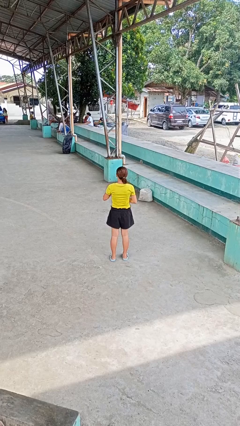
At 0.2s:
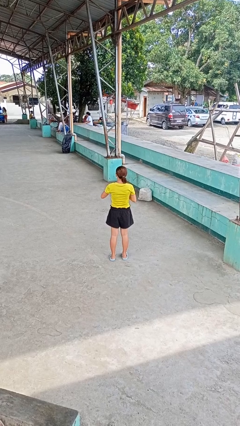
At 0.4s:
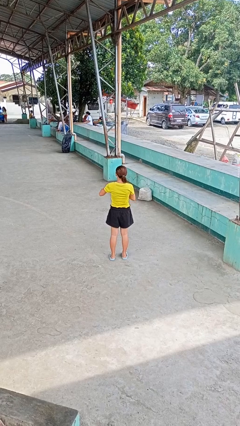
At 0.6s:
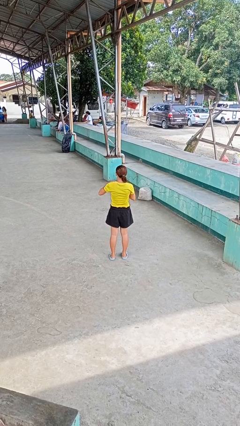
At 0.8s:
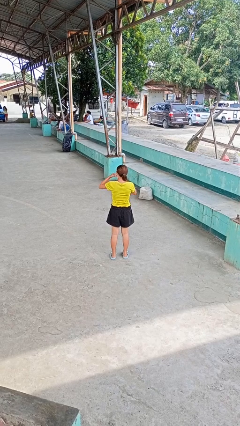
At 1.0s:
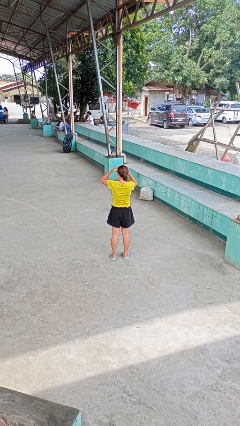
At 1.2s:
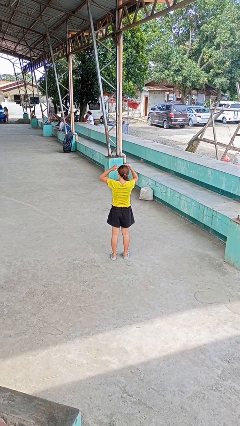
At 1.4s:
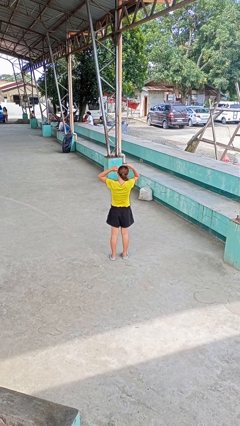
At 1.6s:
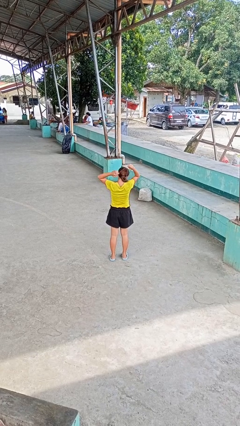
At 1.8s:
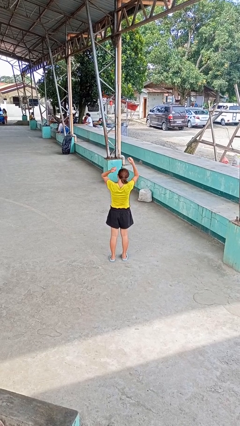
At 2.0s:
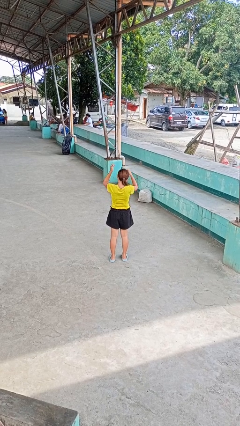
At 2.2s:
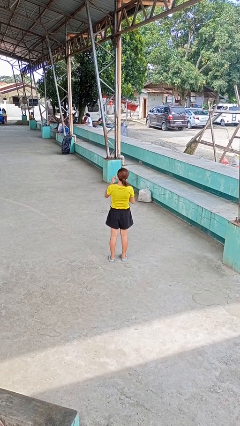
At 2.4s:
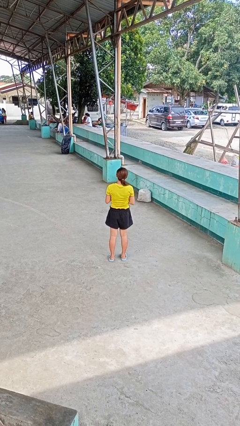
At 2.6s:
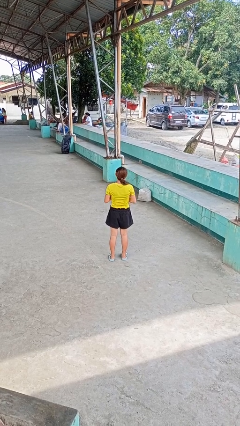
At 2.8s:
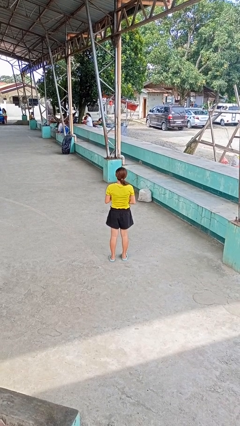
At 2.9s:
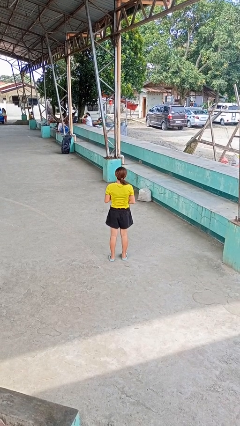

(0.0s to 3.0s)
person takes off necklace

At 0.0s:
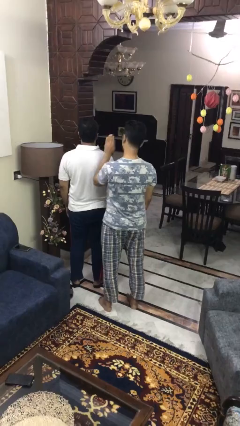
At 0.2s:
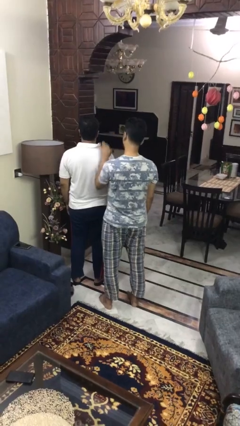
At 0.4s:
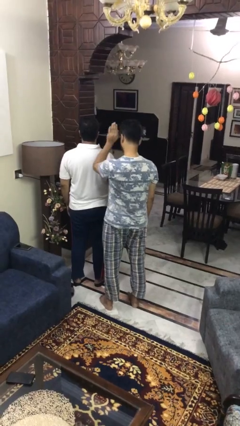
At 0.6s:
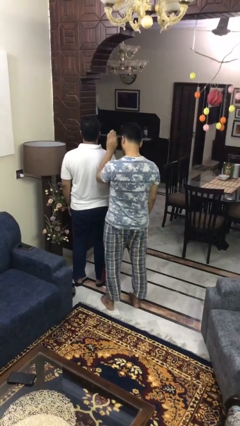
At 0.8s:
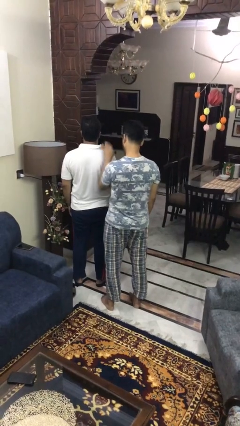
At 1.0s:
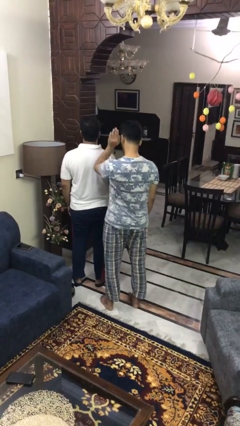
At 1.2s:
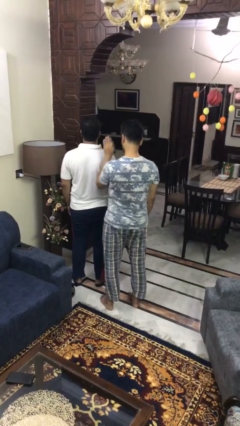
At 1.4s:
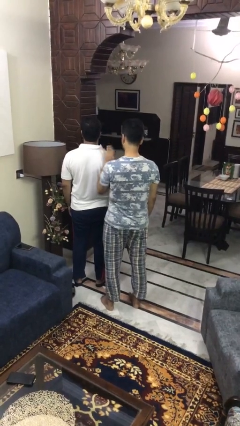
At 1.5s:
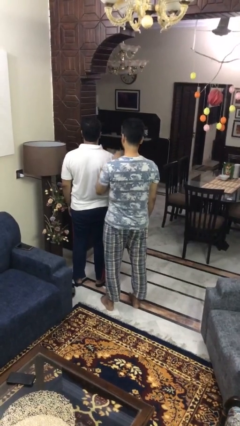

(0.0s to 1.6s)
person pounds shoulders of person

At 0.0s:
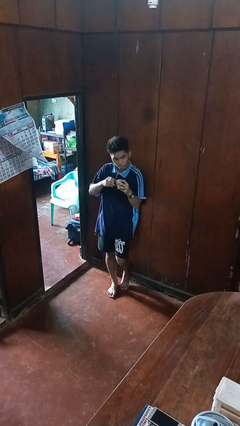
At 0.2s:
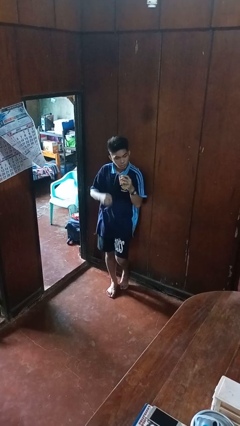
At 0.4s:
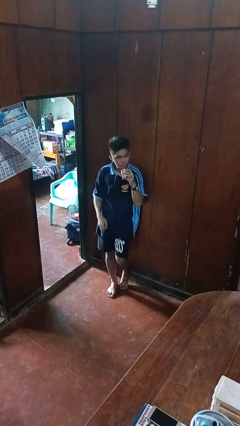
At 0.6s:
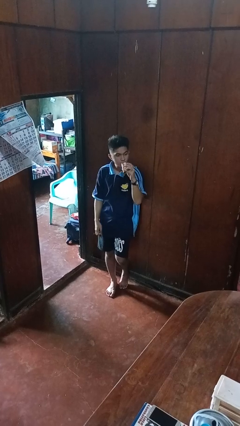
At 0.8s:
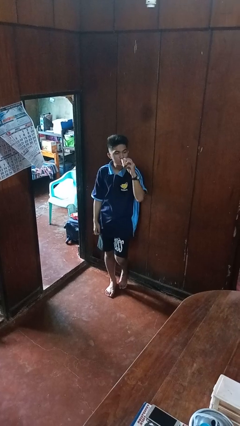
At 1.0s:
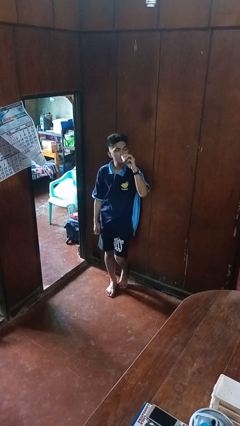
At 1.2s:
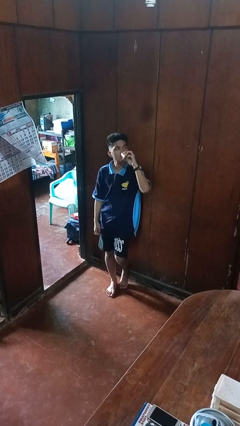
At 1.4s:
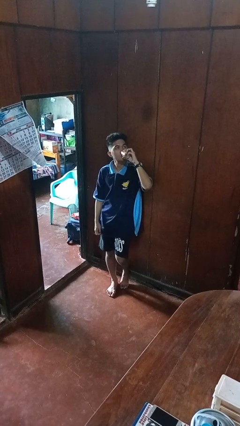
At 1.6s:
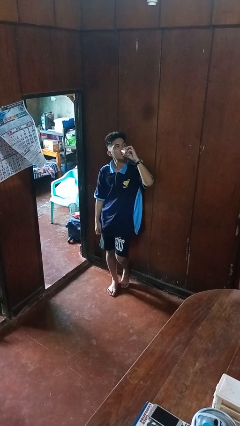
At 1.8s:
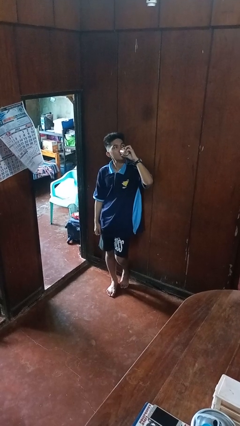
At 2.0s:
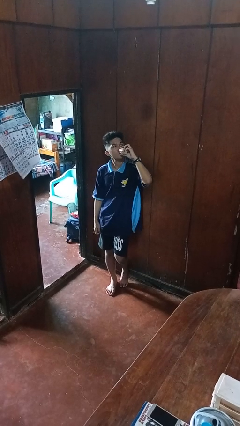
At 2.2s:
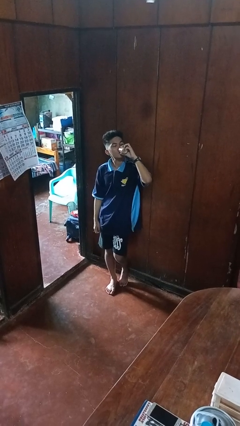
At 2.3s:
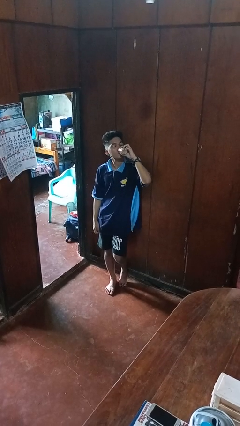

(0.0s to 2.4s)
person drinks from beverage can

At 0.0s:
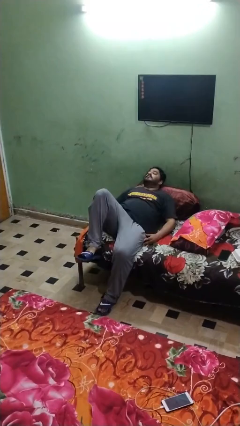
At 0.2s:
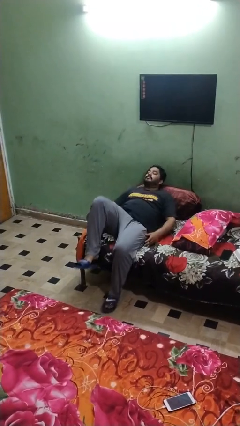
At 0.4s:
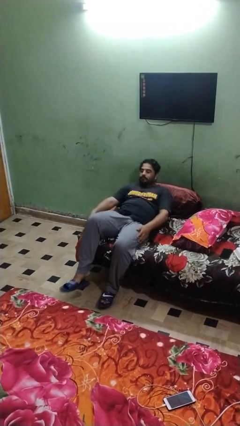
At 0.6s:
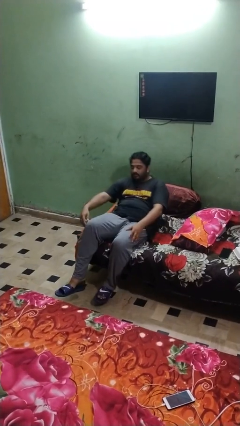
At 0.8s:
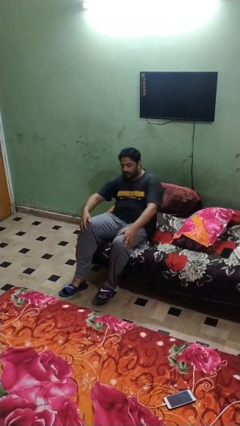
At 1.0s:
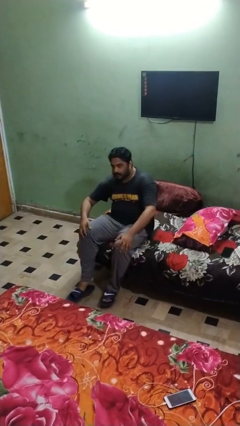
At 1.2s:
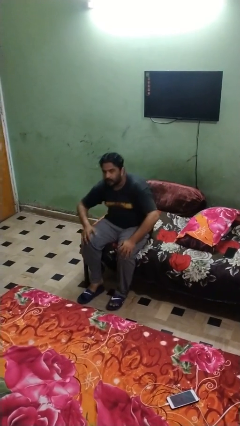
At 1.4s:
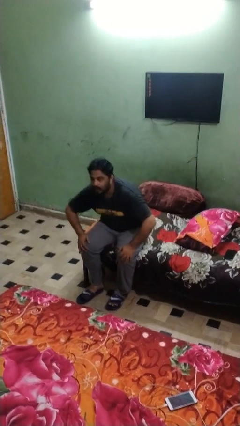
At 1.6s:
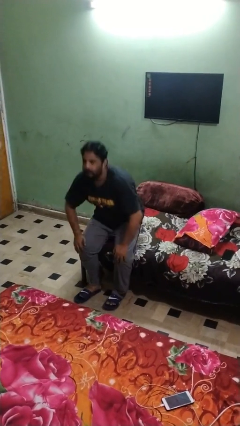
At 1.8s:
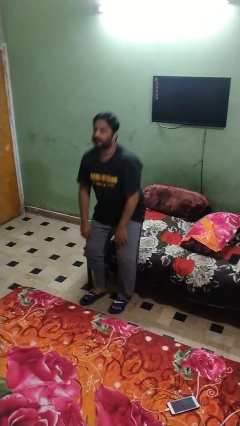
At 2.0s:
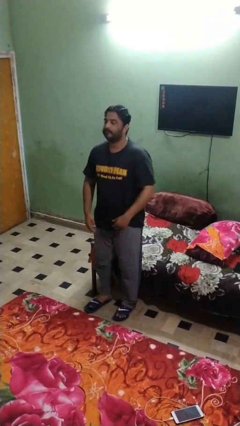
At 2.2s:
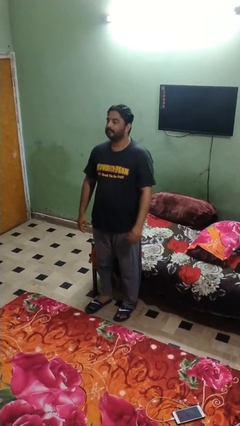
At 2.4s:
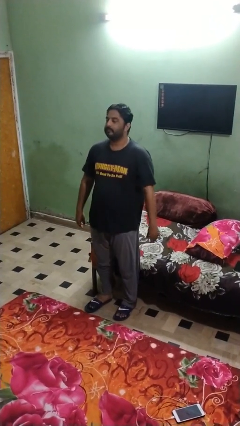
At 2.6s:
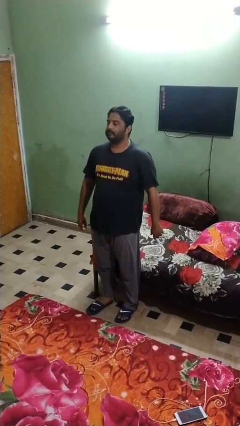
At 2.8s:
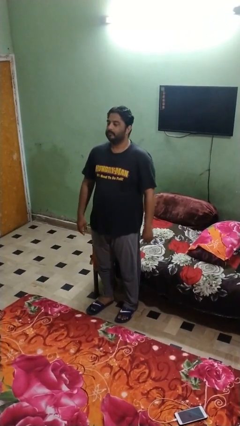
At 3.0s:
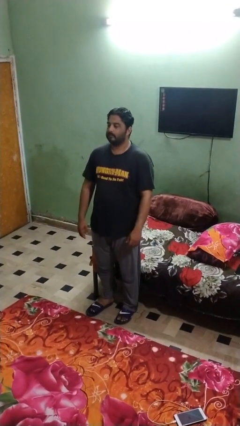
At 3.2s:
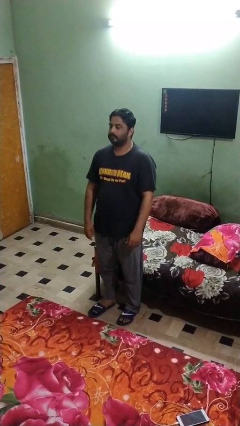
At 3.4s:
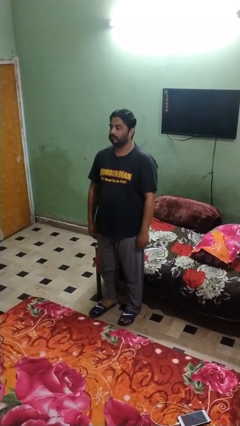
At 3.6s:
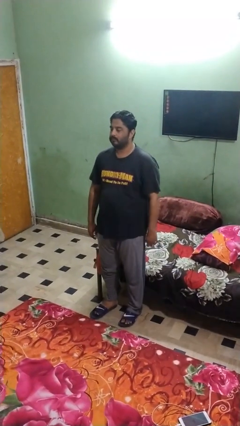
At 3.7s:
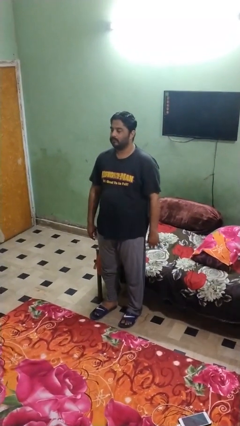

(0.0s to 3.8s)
person stands up

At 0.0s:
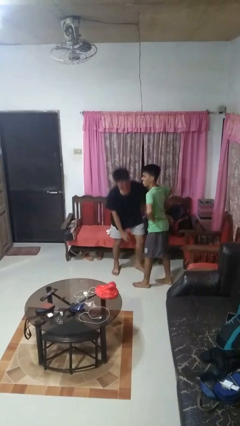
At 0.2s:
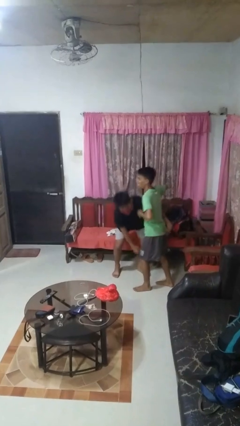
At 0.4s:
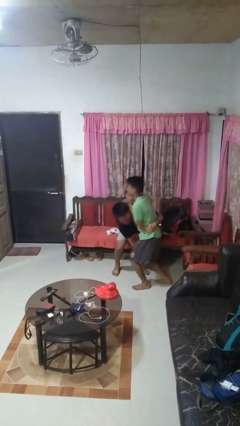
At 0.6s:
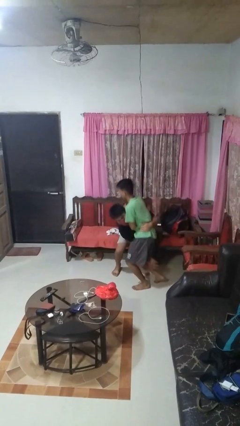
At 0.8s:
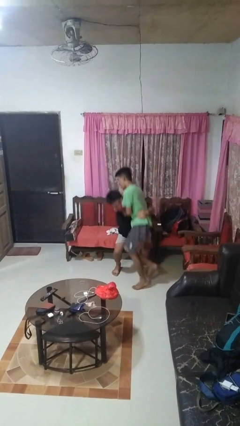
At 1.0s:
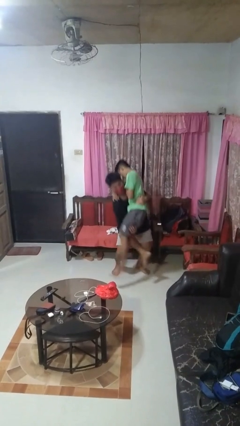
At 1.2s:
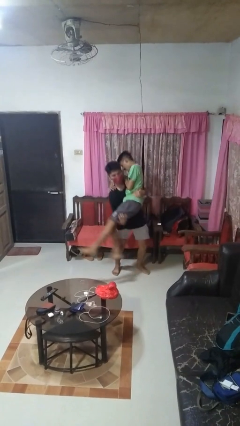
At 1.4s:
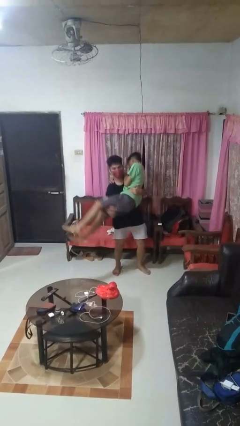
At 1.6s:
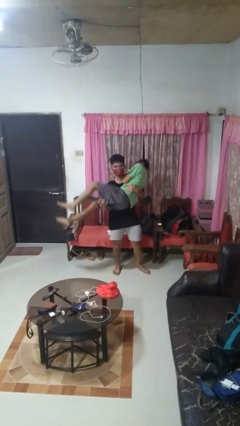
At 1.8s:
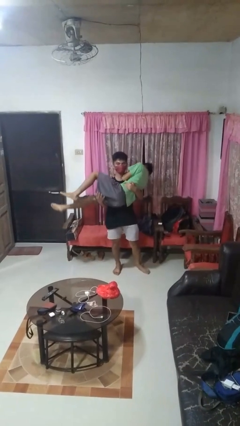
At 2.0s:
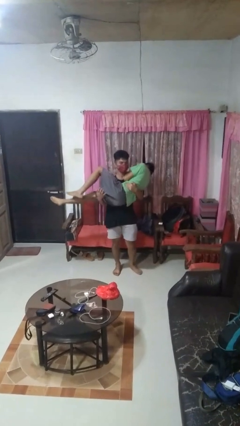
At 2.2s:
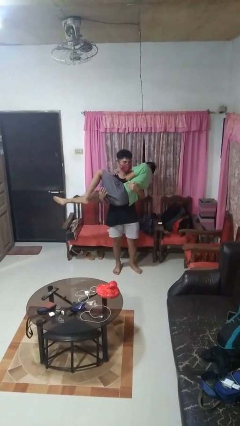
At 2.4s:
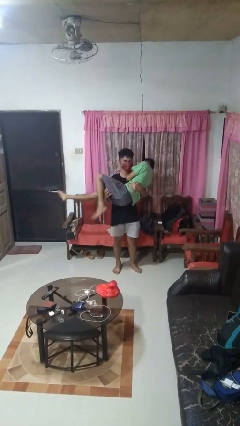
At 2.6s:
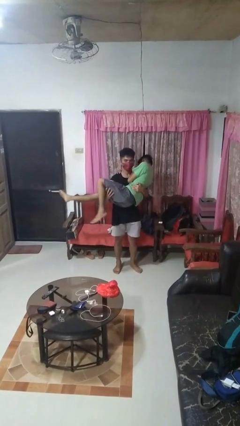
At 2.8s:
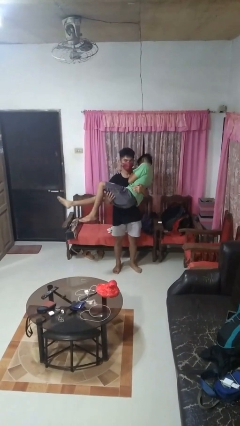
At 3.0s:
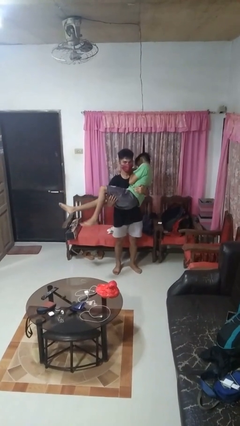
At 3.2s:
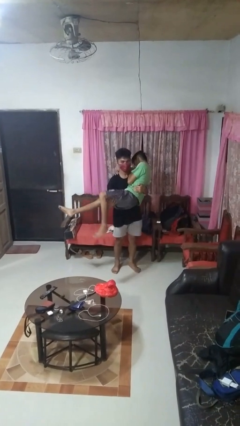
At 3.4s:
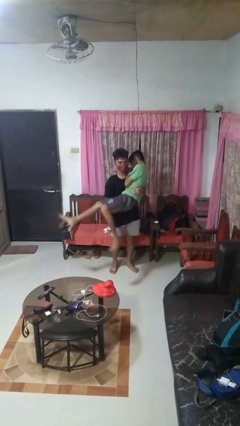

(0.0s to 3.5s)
person picks up person

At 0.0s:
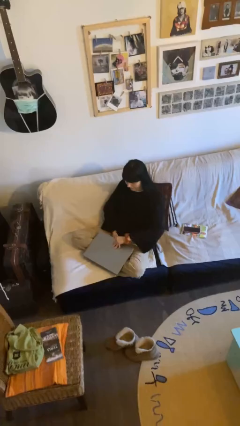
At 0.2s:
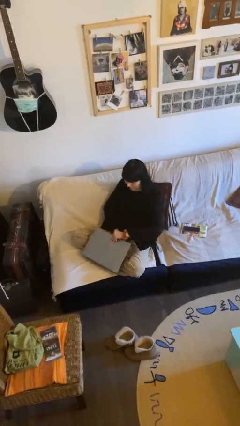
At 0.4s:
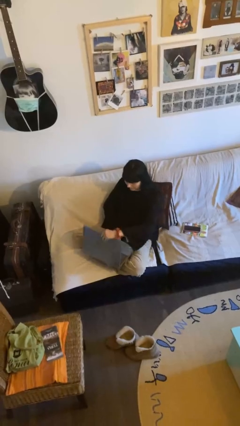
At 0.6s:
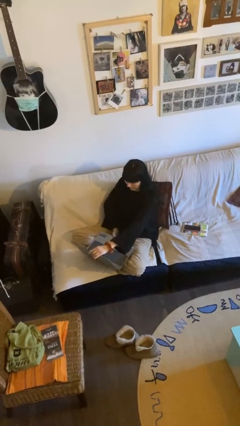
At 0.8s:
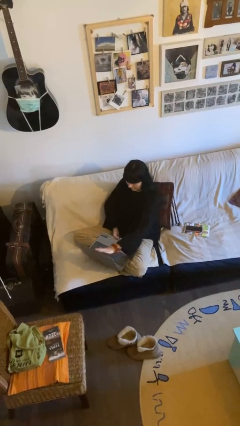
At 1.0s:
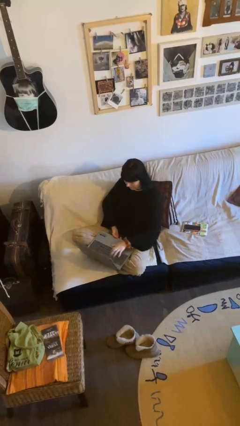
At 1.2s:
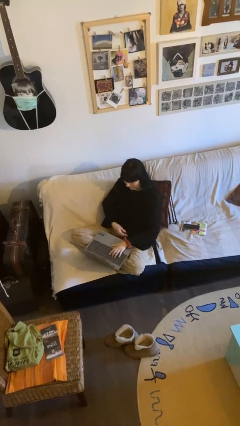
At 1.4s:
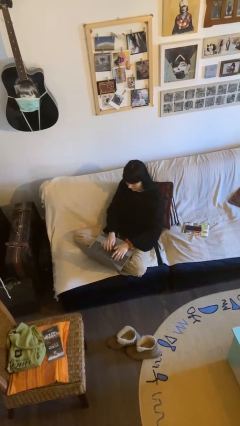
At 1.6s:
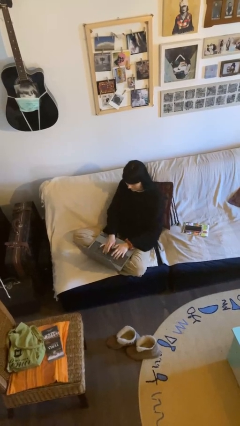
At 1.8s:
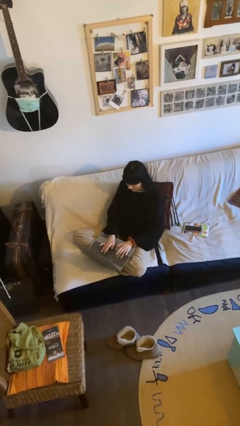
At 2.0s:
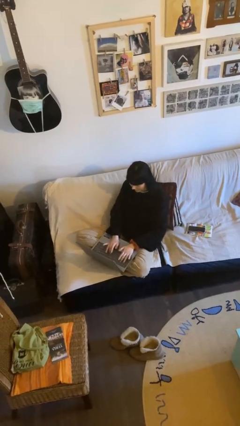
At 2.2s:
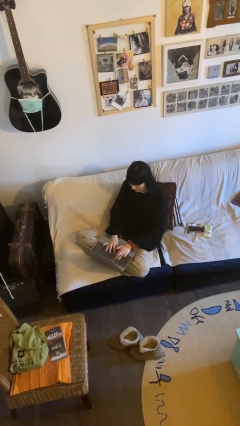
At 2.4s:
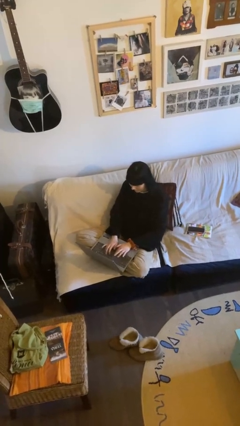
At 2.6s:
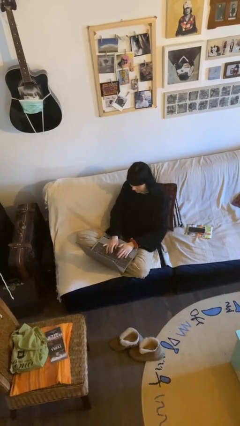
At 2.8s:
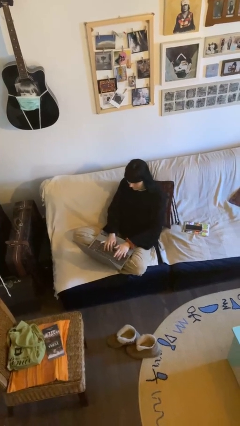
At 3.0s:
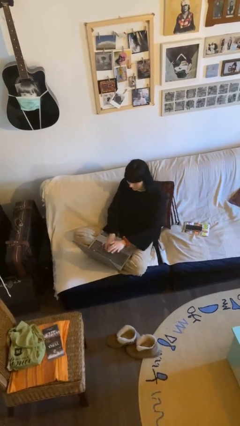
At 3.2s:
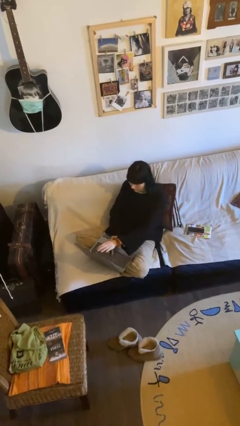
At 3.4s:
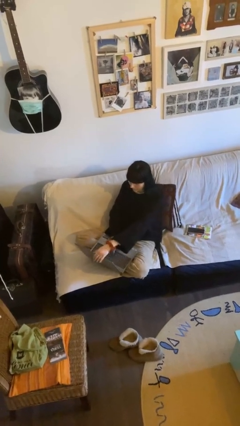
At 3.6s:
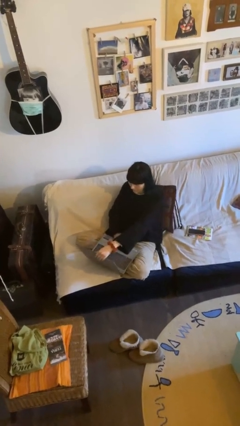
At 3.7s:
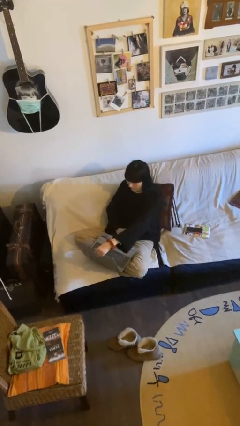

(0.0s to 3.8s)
person interacts with laptop
